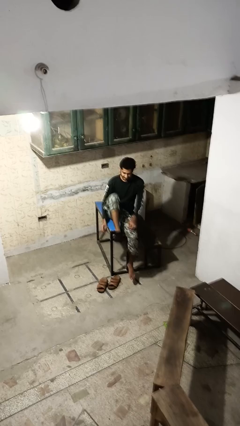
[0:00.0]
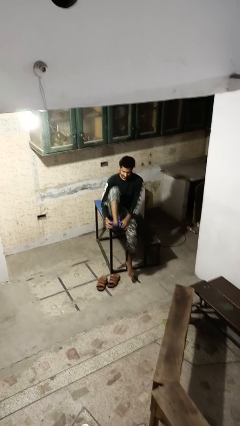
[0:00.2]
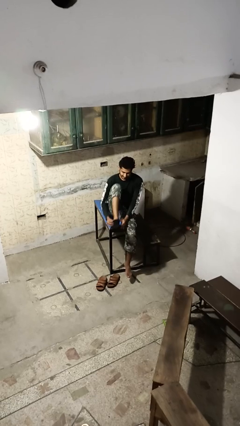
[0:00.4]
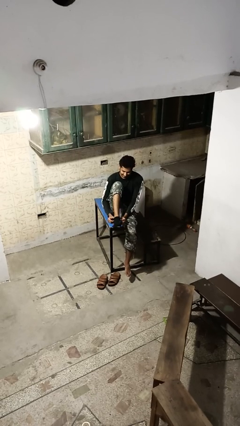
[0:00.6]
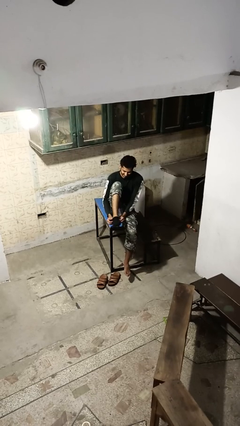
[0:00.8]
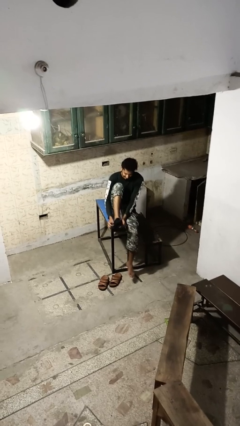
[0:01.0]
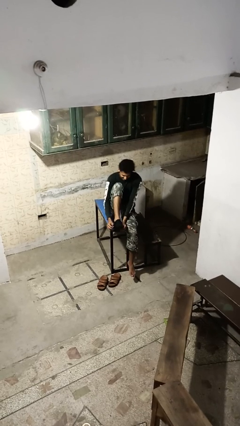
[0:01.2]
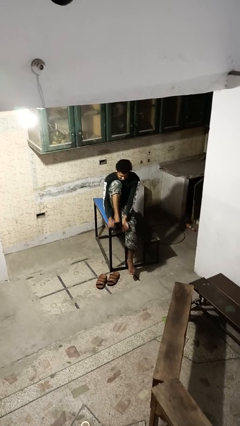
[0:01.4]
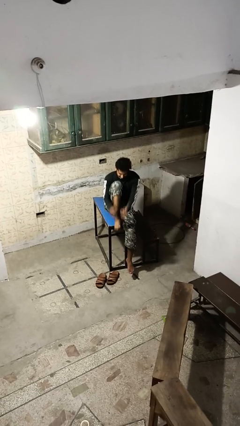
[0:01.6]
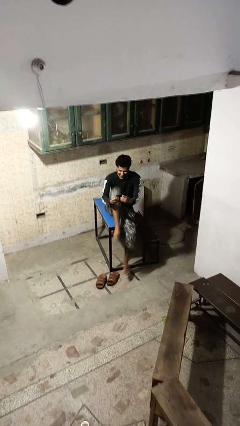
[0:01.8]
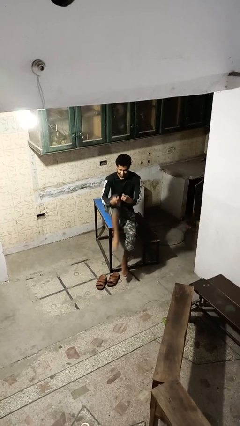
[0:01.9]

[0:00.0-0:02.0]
person takes off socks

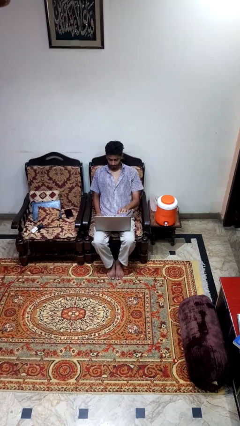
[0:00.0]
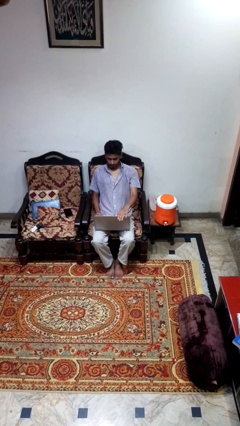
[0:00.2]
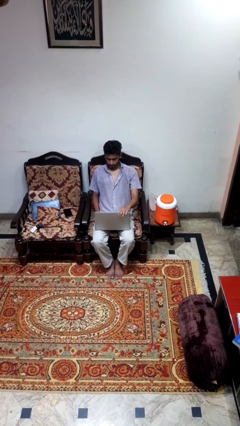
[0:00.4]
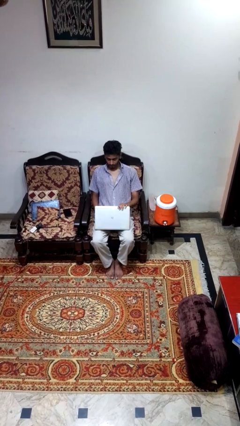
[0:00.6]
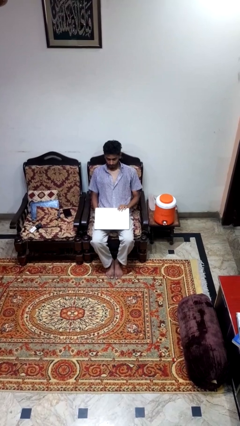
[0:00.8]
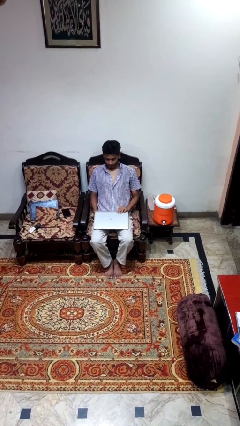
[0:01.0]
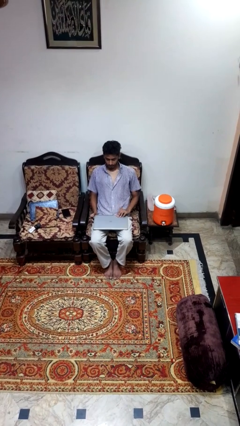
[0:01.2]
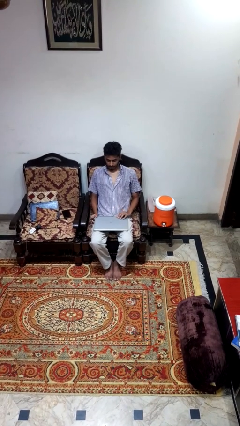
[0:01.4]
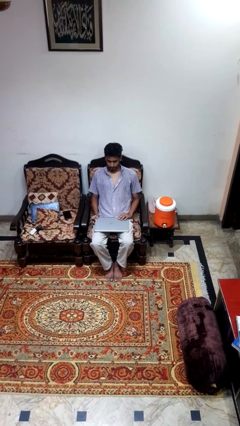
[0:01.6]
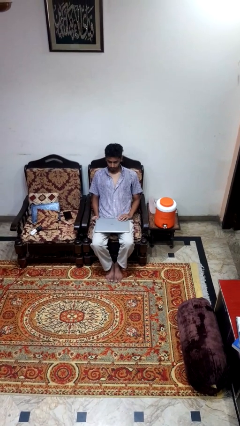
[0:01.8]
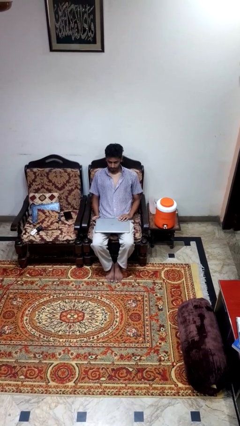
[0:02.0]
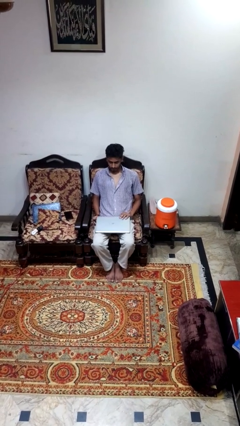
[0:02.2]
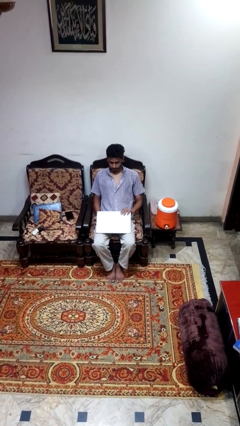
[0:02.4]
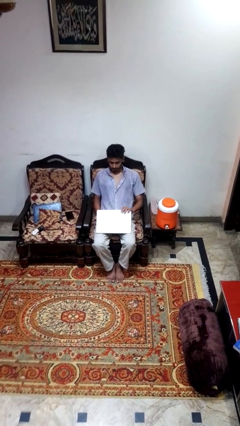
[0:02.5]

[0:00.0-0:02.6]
person closes laptop

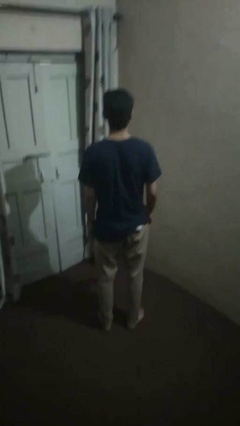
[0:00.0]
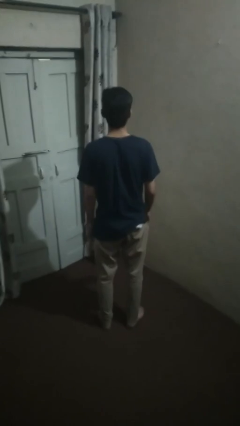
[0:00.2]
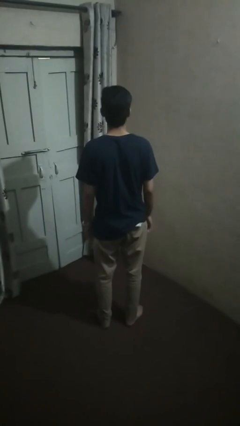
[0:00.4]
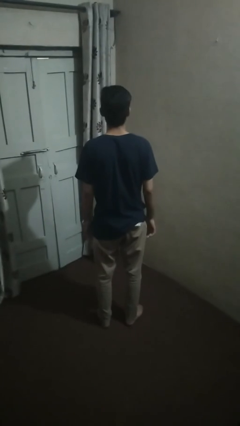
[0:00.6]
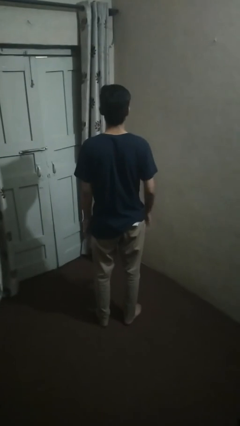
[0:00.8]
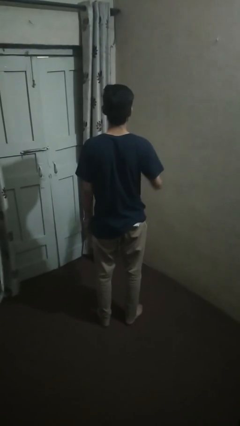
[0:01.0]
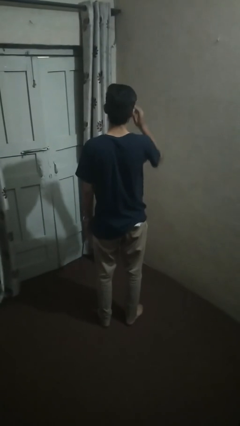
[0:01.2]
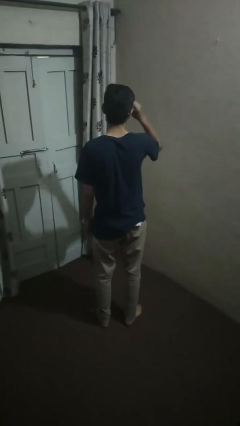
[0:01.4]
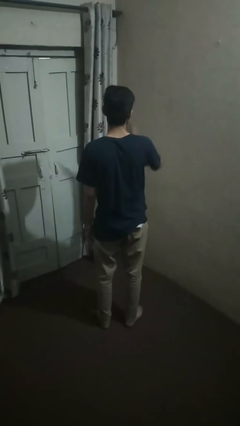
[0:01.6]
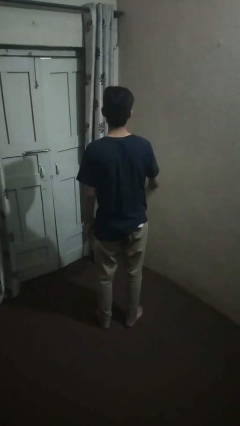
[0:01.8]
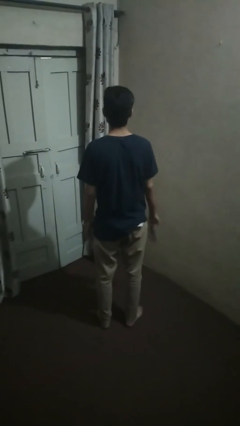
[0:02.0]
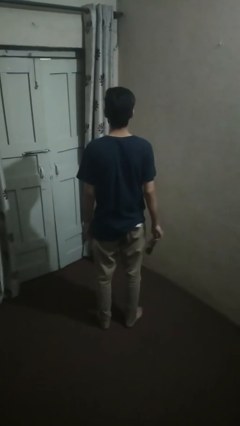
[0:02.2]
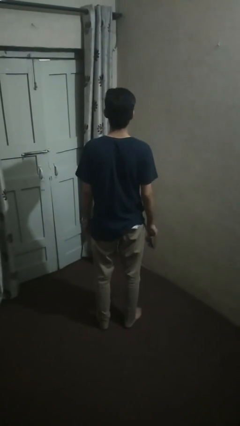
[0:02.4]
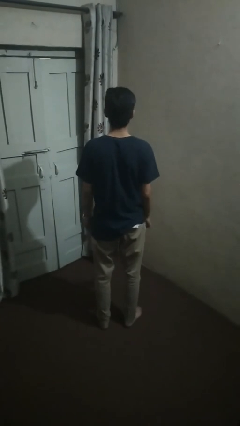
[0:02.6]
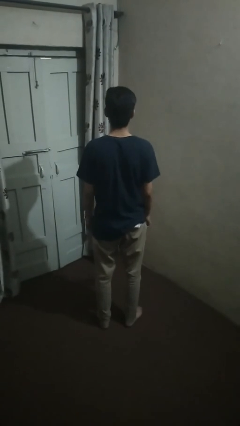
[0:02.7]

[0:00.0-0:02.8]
person takes off sunglasses

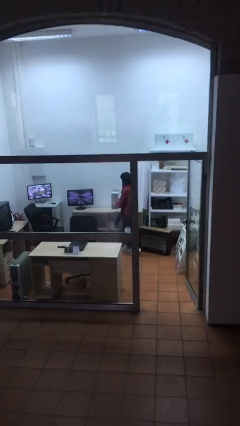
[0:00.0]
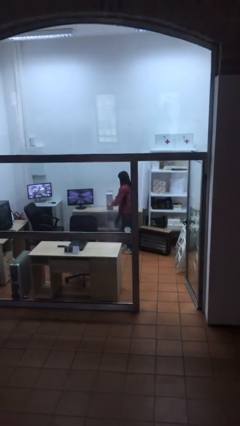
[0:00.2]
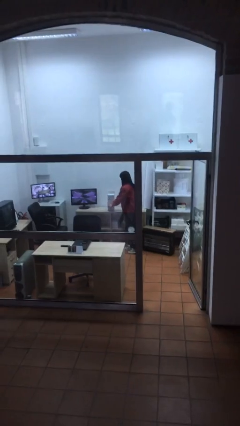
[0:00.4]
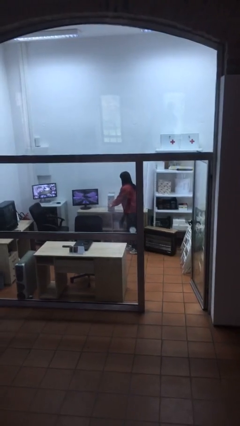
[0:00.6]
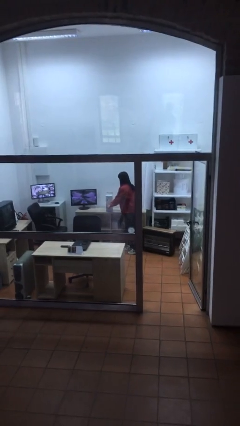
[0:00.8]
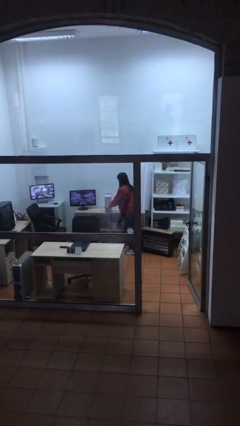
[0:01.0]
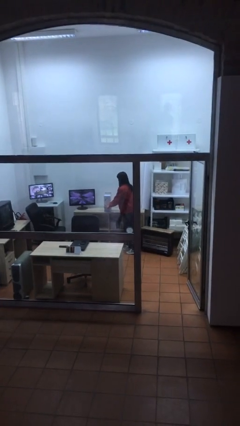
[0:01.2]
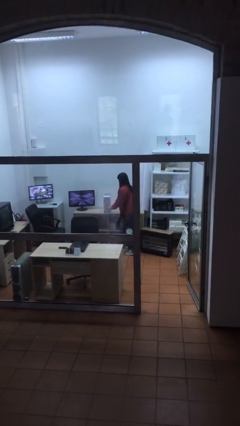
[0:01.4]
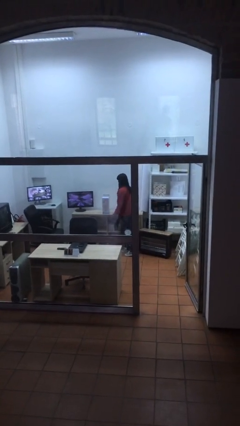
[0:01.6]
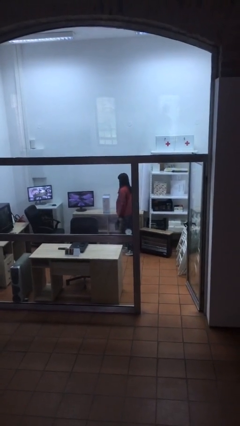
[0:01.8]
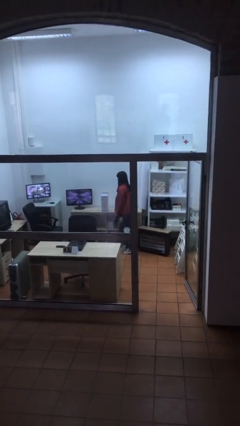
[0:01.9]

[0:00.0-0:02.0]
person puts down object on table

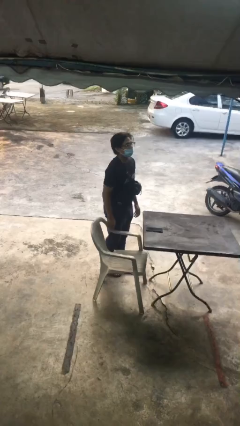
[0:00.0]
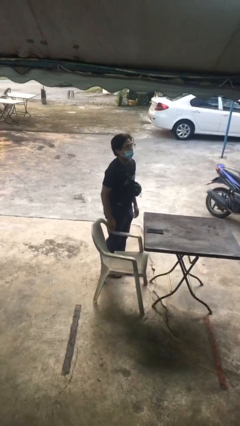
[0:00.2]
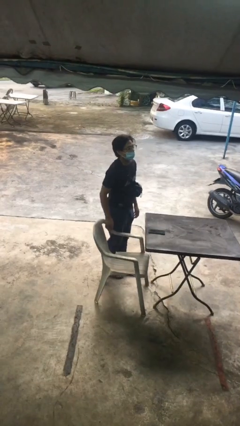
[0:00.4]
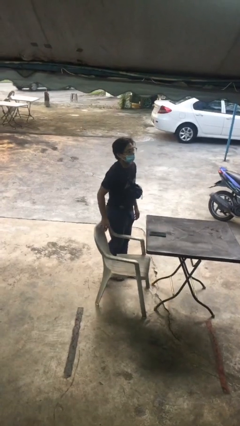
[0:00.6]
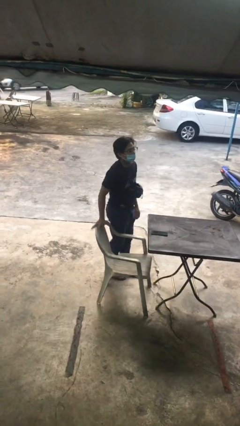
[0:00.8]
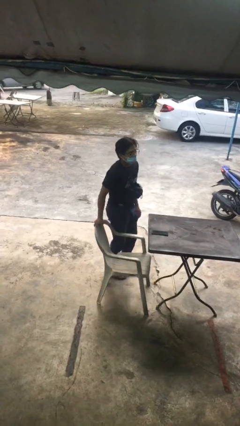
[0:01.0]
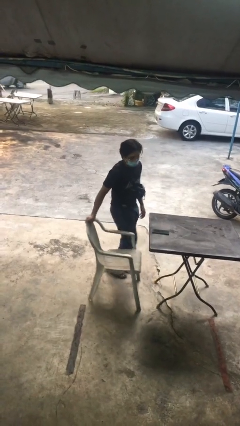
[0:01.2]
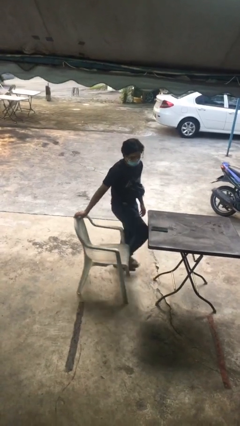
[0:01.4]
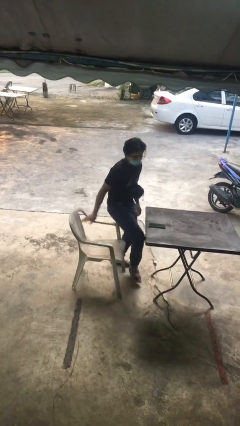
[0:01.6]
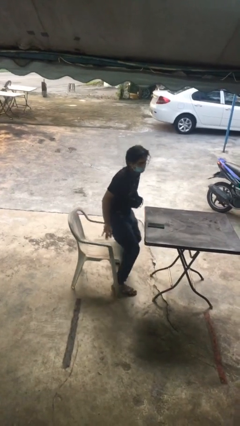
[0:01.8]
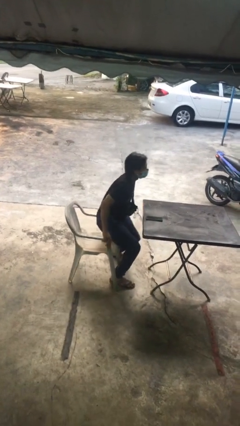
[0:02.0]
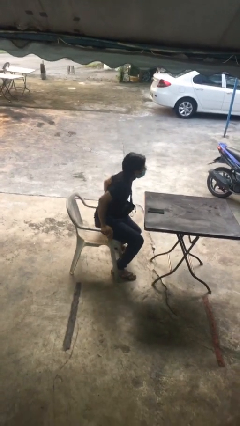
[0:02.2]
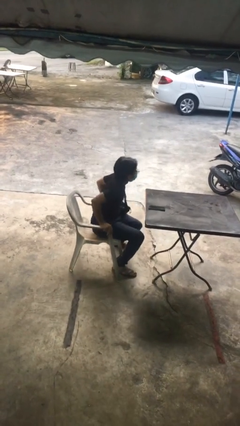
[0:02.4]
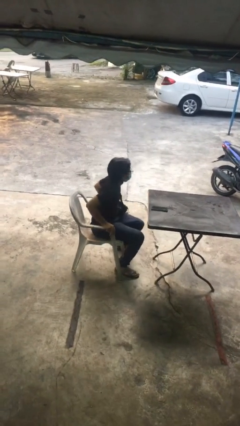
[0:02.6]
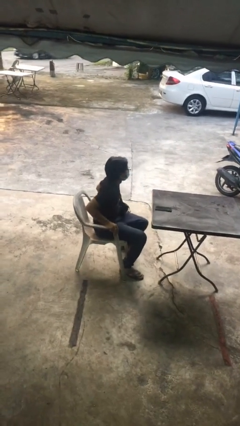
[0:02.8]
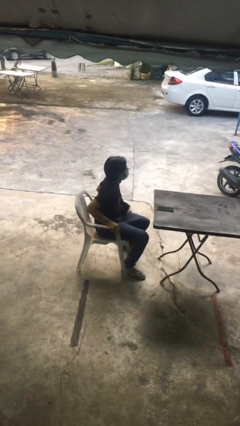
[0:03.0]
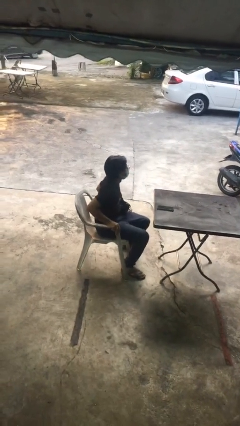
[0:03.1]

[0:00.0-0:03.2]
person sits down
